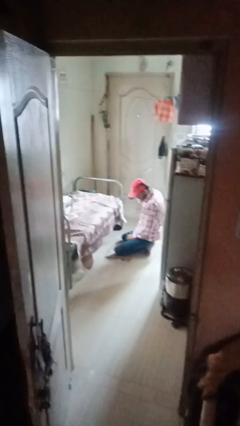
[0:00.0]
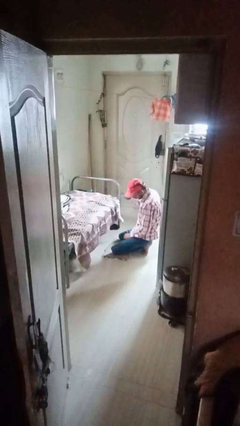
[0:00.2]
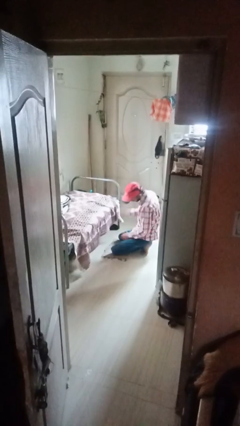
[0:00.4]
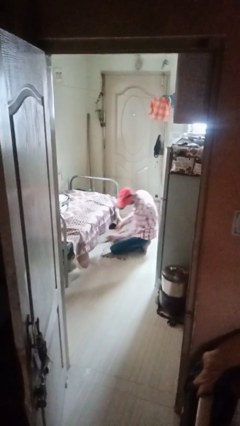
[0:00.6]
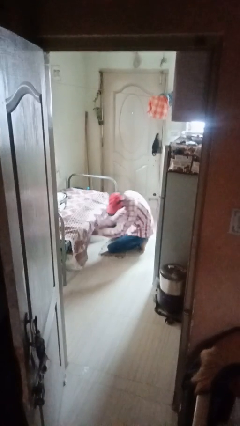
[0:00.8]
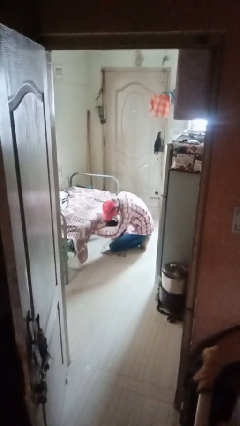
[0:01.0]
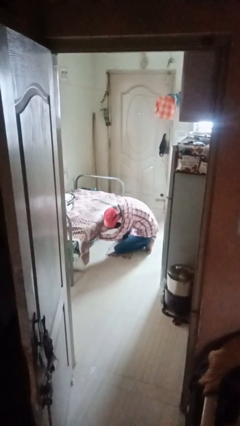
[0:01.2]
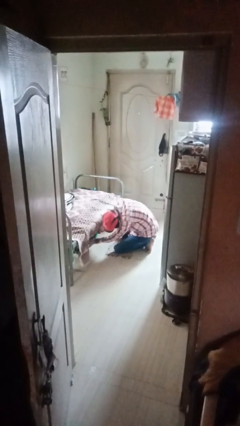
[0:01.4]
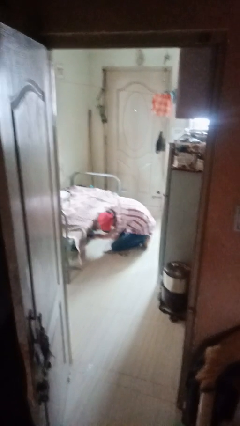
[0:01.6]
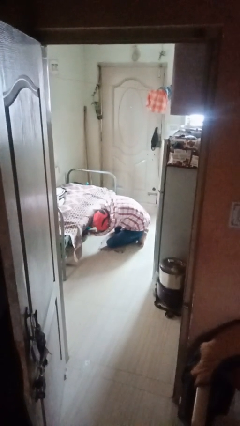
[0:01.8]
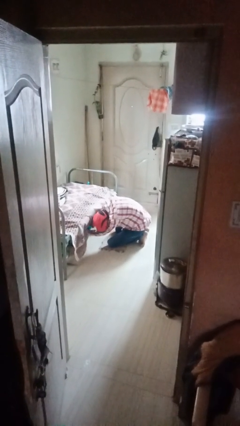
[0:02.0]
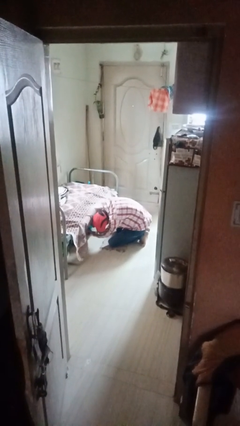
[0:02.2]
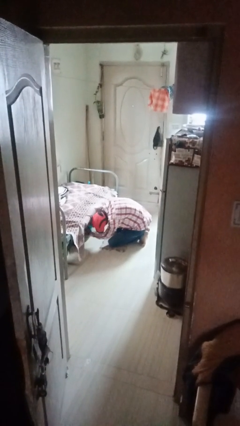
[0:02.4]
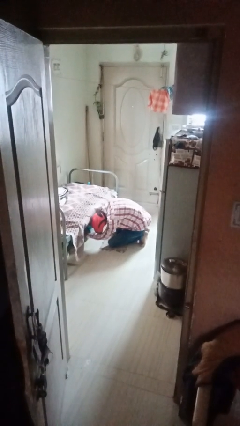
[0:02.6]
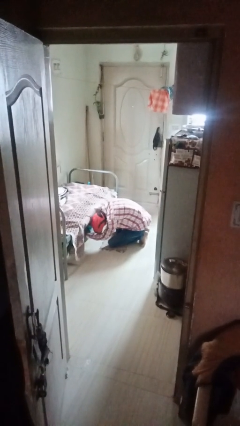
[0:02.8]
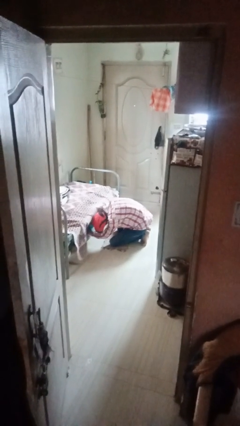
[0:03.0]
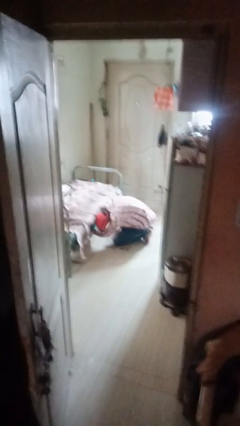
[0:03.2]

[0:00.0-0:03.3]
person searches under bed

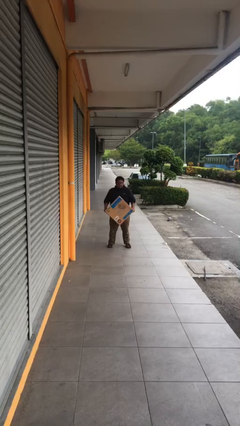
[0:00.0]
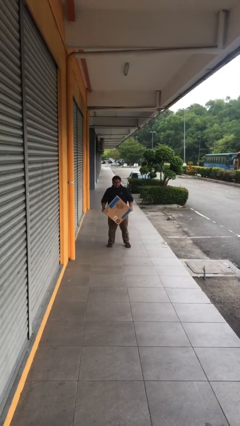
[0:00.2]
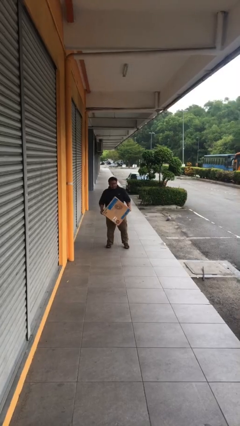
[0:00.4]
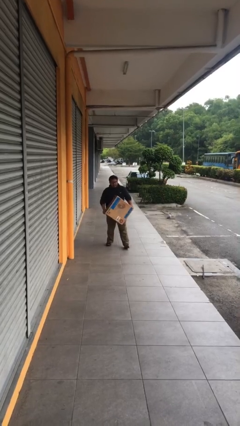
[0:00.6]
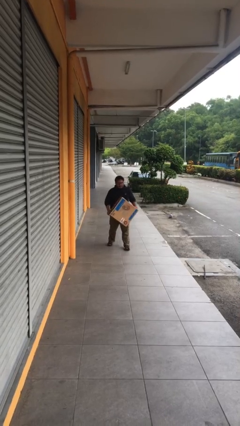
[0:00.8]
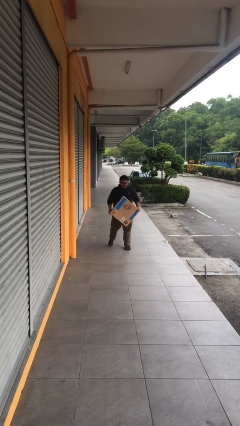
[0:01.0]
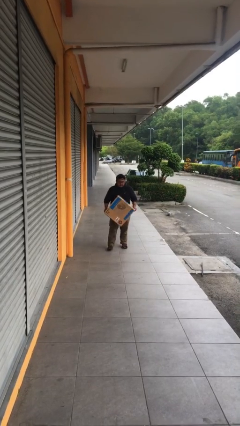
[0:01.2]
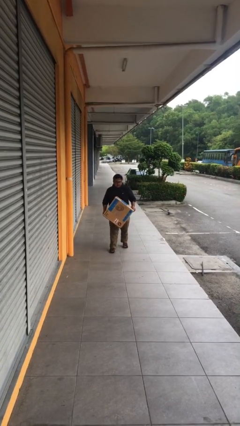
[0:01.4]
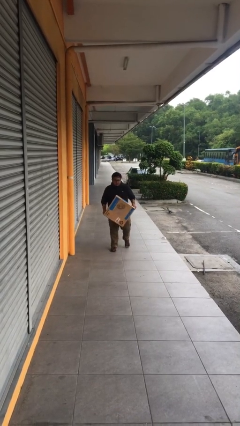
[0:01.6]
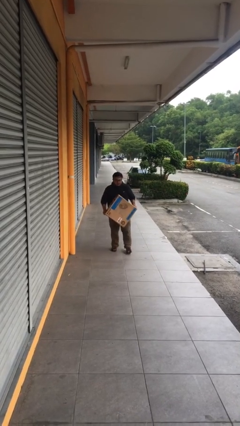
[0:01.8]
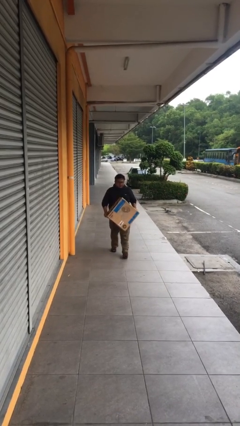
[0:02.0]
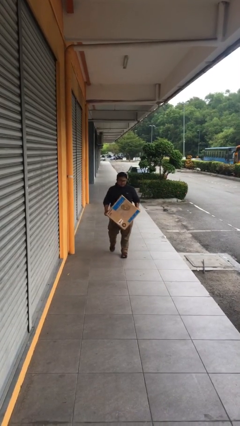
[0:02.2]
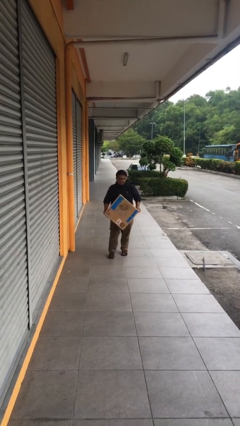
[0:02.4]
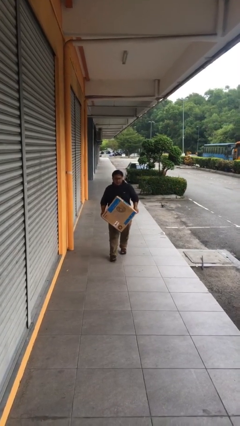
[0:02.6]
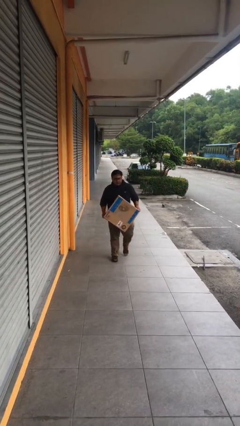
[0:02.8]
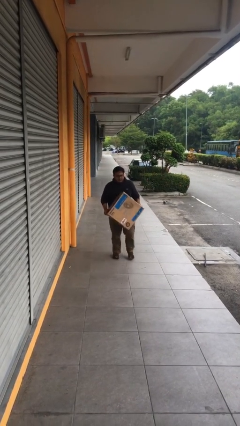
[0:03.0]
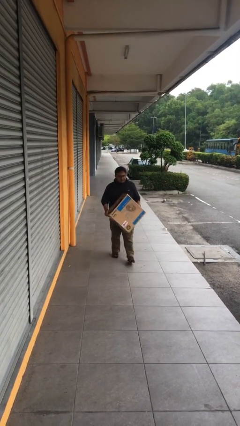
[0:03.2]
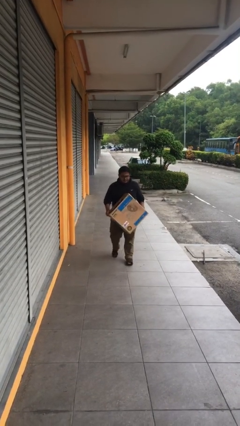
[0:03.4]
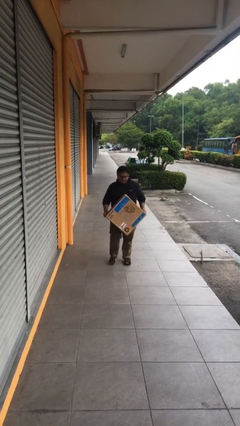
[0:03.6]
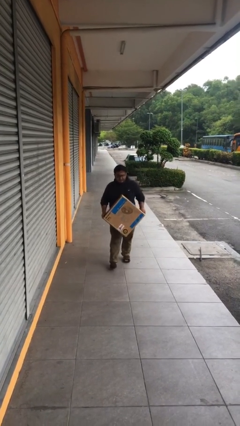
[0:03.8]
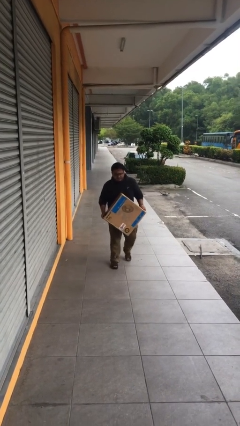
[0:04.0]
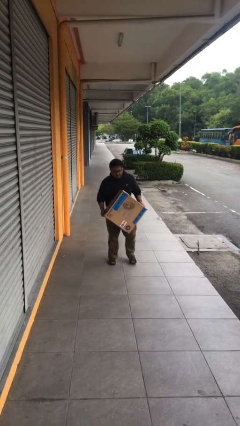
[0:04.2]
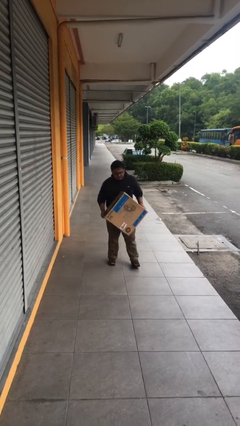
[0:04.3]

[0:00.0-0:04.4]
person carries heavy object

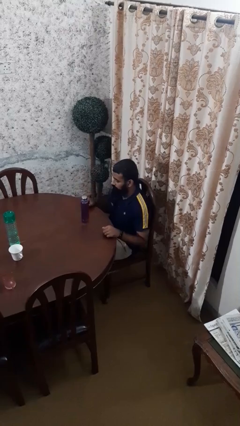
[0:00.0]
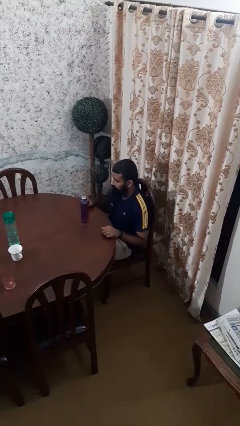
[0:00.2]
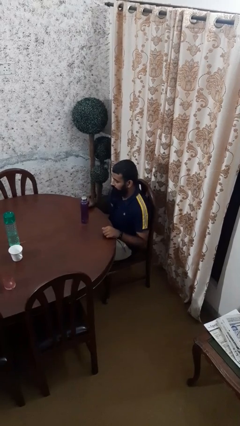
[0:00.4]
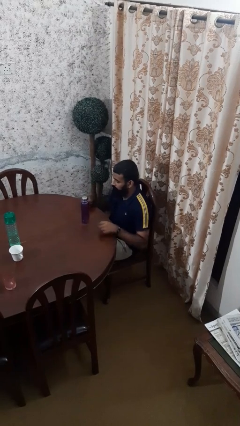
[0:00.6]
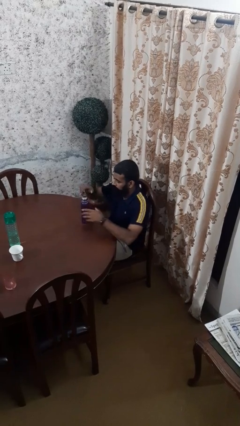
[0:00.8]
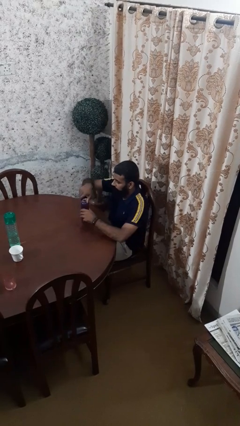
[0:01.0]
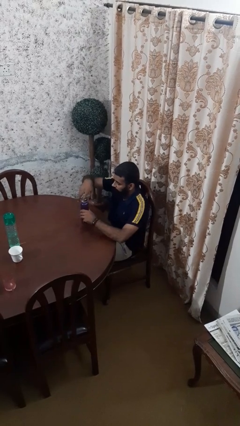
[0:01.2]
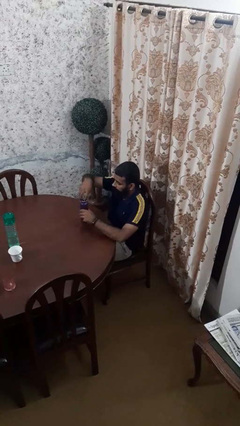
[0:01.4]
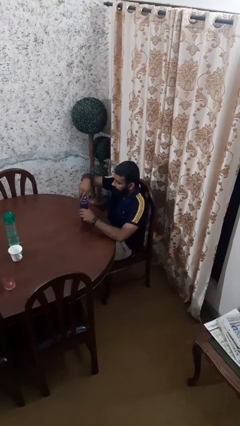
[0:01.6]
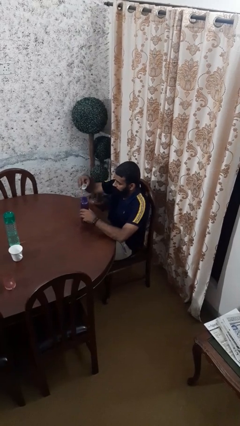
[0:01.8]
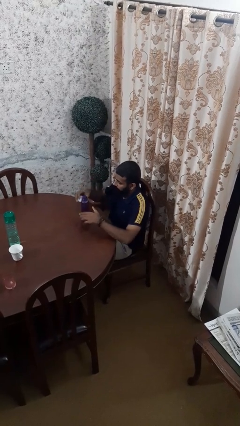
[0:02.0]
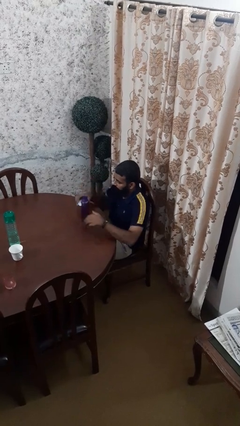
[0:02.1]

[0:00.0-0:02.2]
person unscrews lid from bottle

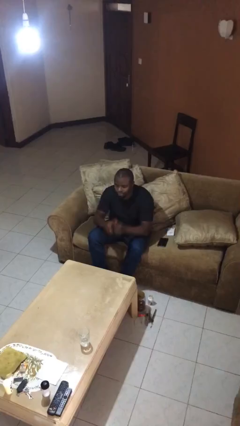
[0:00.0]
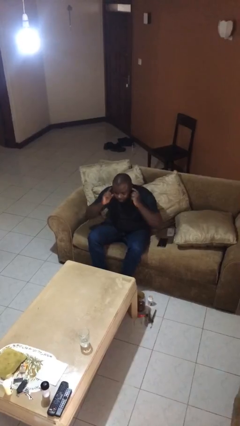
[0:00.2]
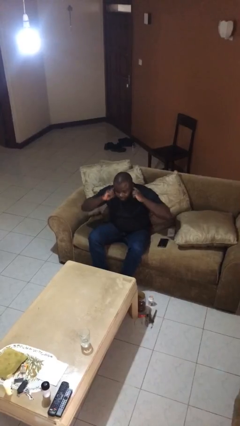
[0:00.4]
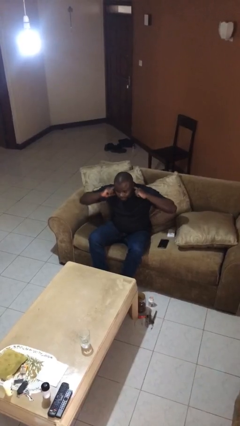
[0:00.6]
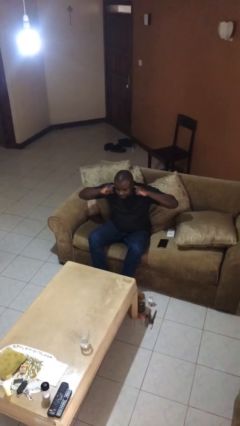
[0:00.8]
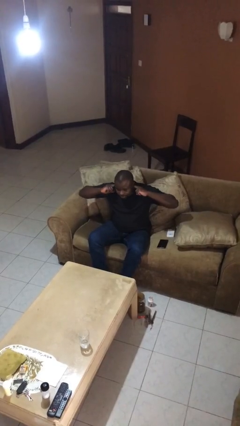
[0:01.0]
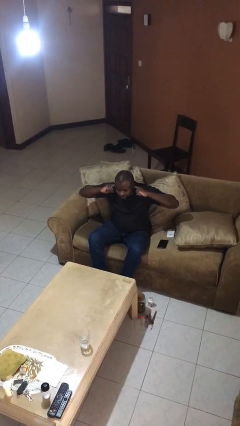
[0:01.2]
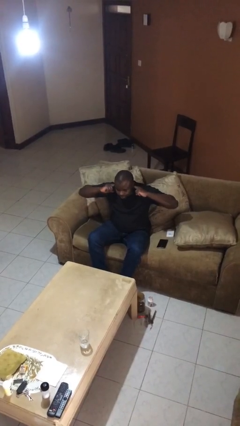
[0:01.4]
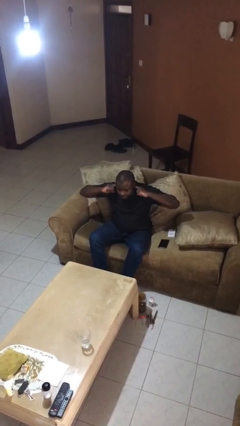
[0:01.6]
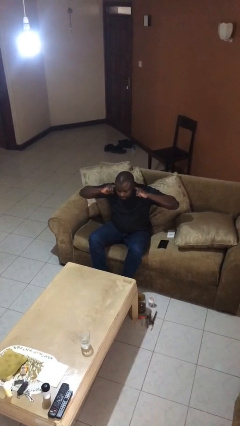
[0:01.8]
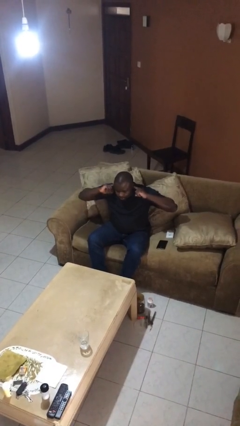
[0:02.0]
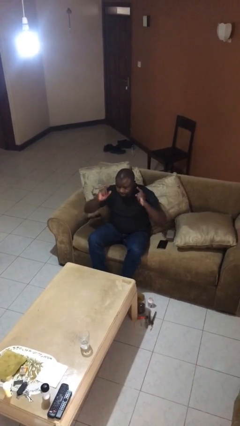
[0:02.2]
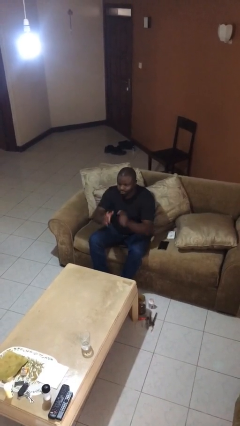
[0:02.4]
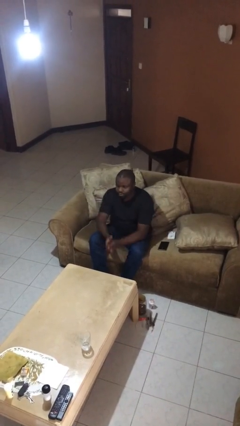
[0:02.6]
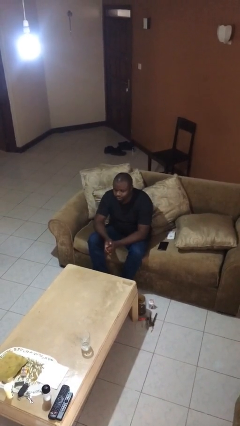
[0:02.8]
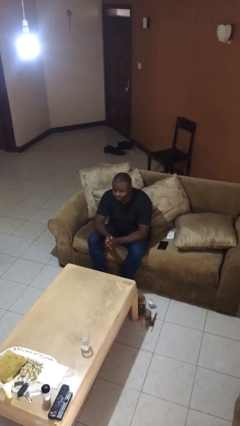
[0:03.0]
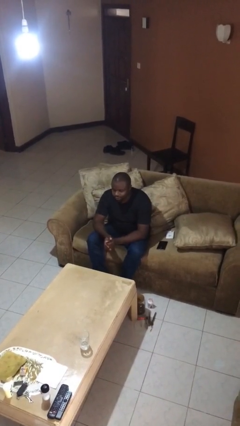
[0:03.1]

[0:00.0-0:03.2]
person puts fingers in ear

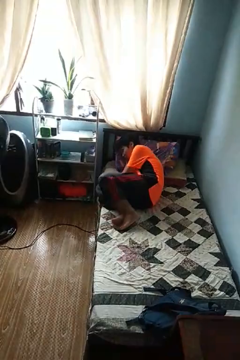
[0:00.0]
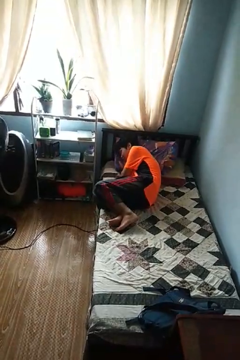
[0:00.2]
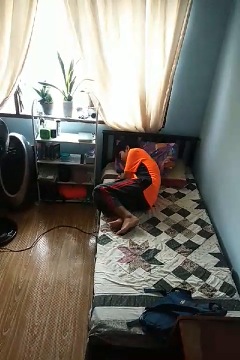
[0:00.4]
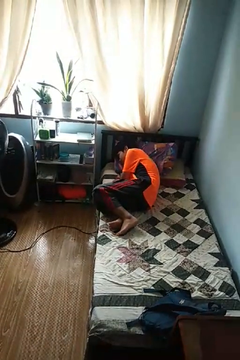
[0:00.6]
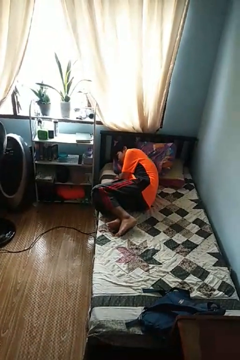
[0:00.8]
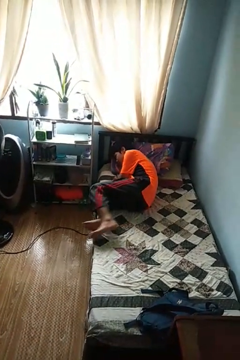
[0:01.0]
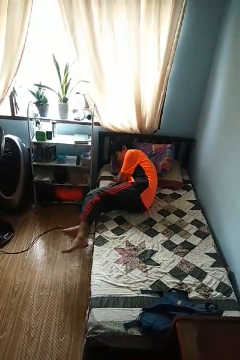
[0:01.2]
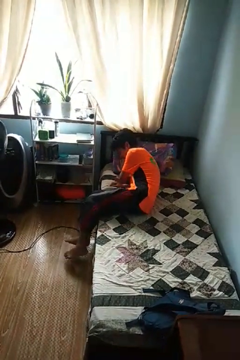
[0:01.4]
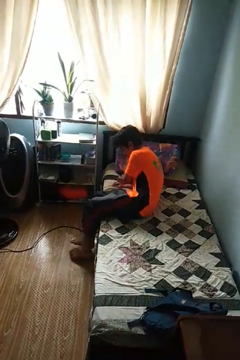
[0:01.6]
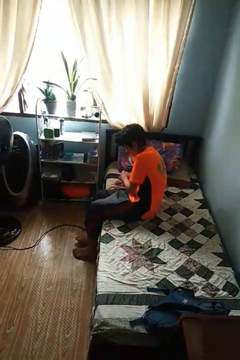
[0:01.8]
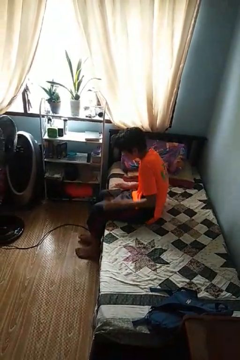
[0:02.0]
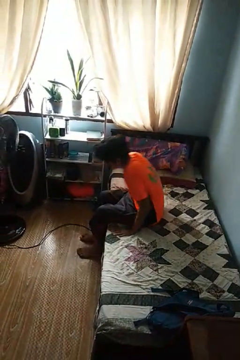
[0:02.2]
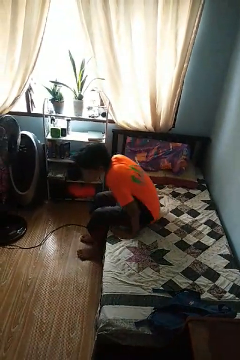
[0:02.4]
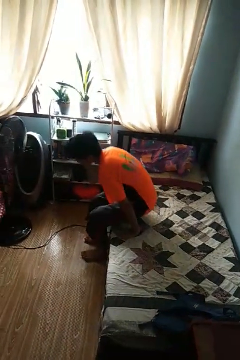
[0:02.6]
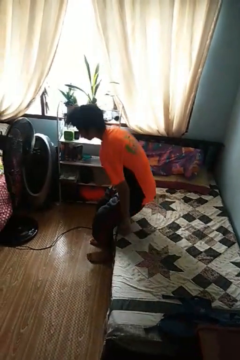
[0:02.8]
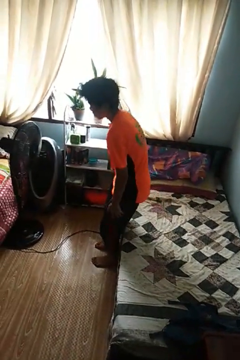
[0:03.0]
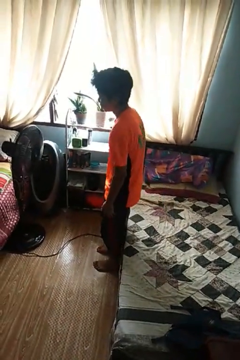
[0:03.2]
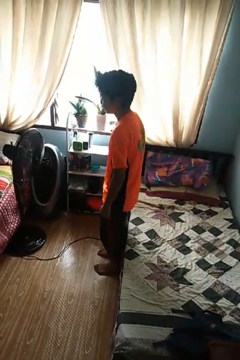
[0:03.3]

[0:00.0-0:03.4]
person stands up

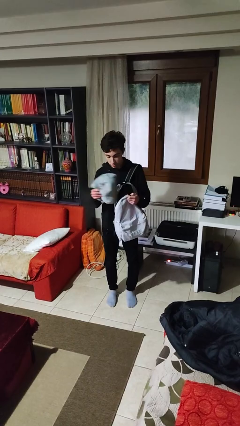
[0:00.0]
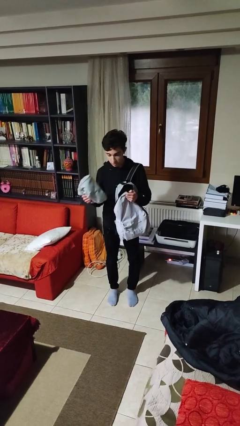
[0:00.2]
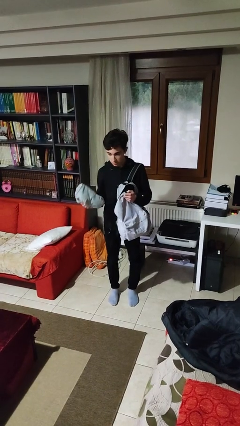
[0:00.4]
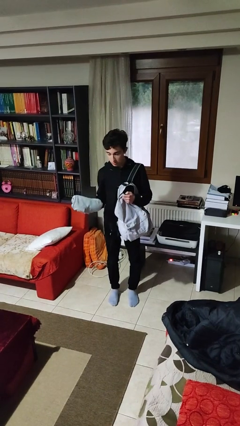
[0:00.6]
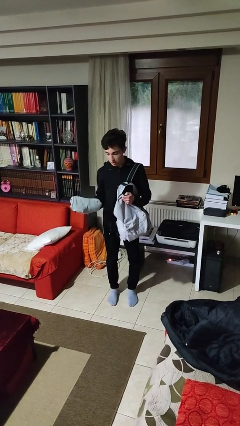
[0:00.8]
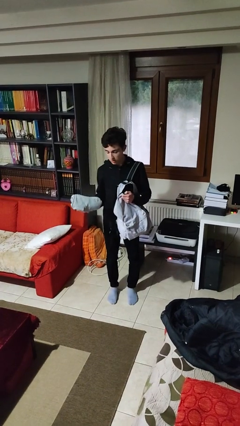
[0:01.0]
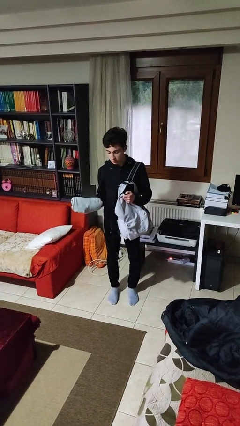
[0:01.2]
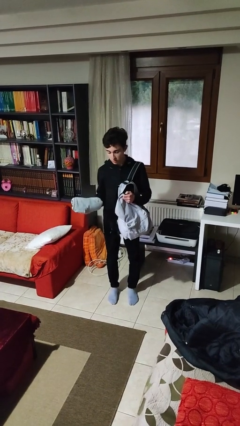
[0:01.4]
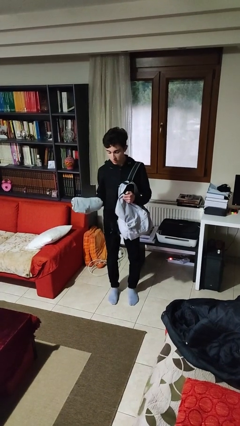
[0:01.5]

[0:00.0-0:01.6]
person takes object from backpack
